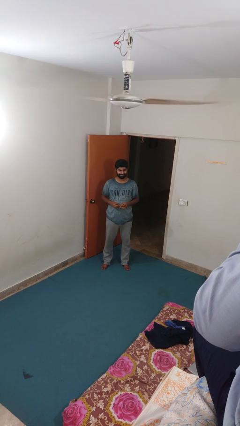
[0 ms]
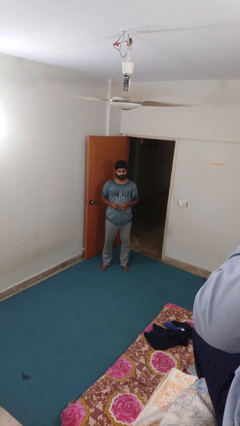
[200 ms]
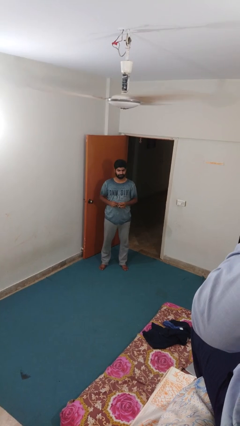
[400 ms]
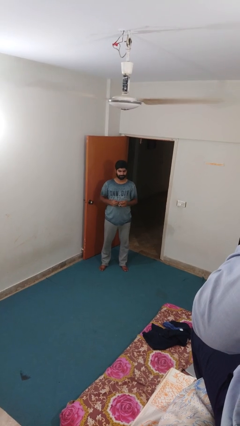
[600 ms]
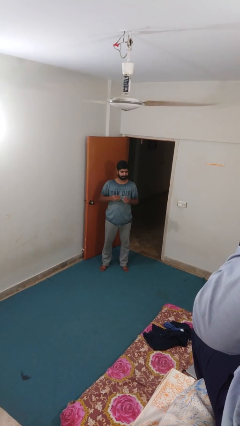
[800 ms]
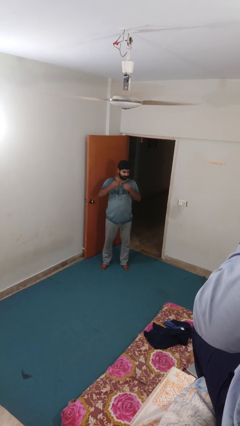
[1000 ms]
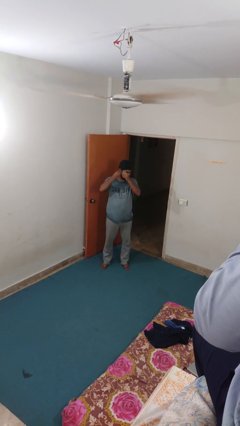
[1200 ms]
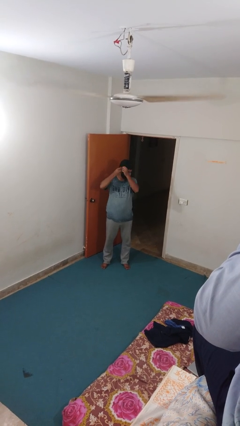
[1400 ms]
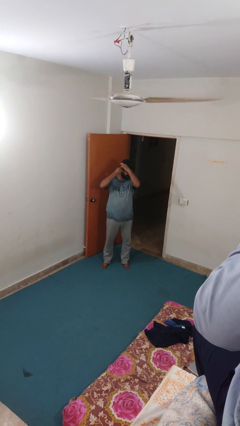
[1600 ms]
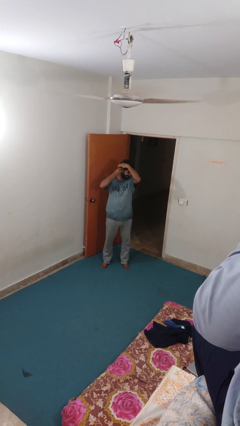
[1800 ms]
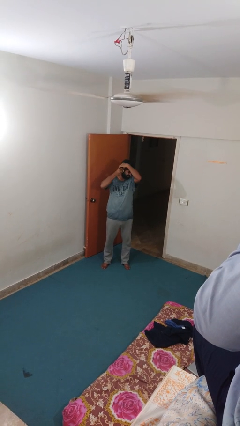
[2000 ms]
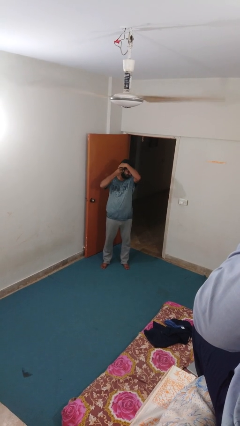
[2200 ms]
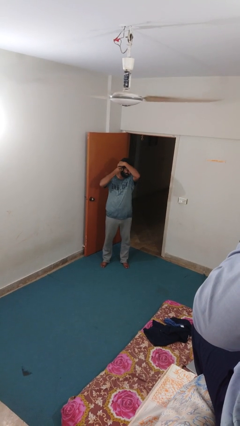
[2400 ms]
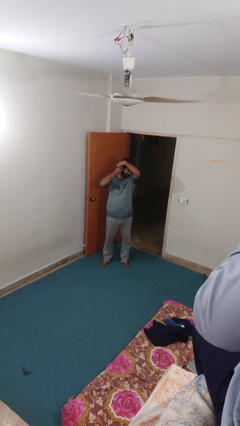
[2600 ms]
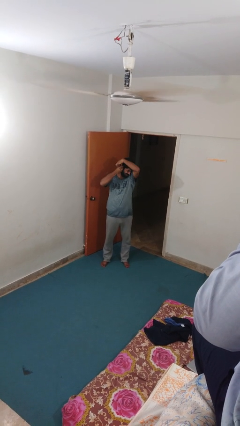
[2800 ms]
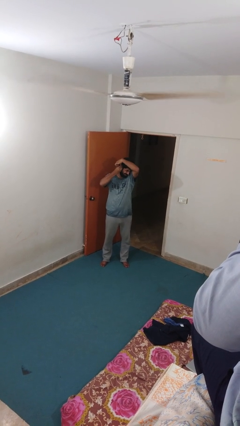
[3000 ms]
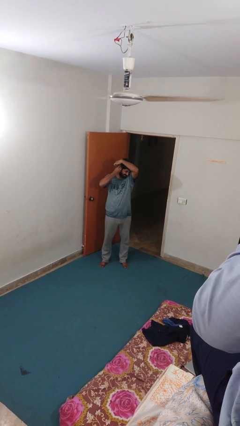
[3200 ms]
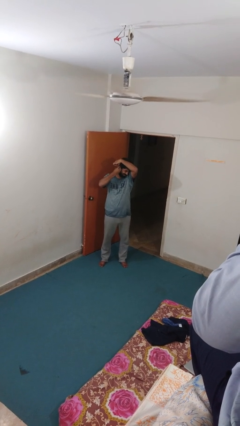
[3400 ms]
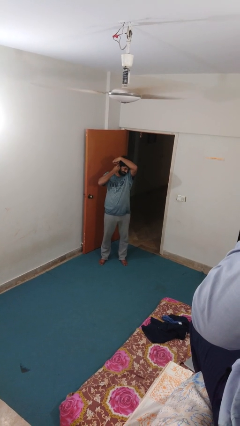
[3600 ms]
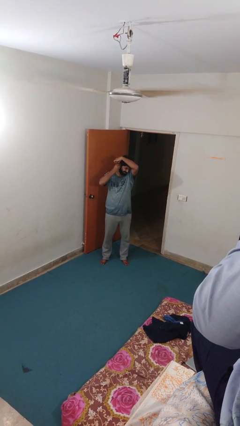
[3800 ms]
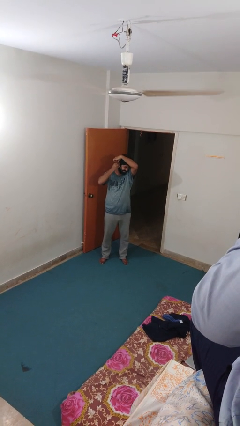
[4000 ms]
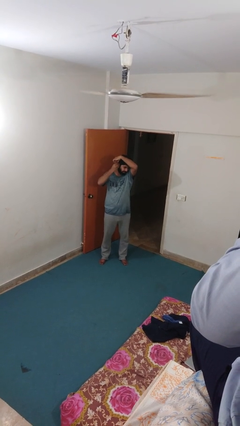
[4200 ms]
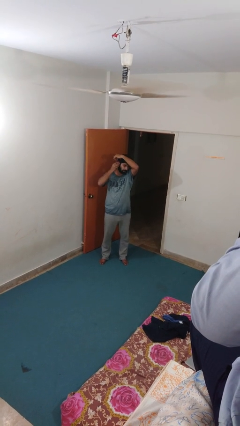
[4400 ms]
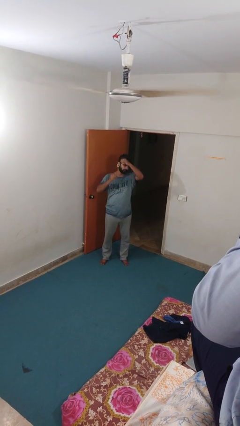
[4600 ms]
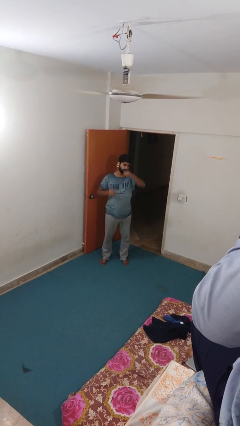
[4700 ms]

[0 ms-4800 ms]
person puts on earrings

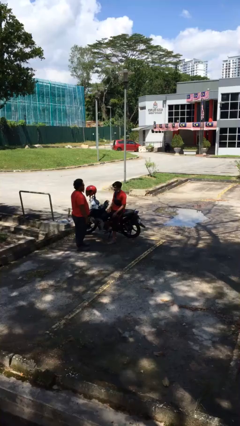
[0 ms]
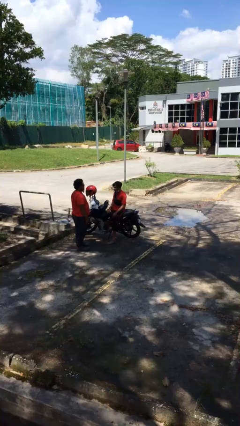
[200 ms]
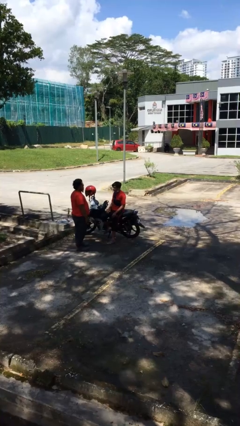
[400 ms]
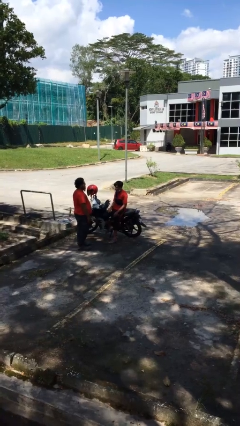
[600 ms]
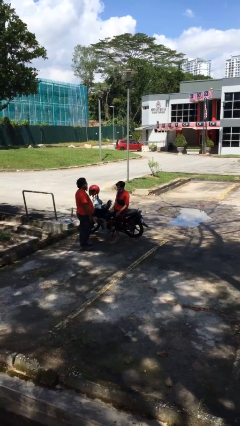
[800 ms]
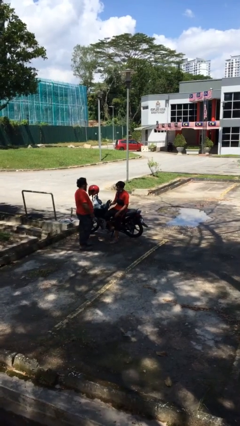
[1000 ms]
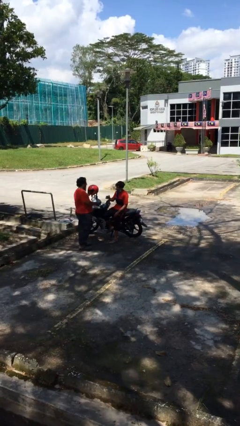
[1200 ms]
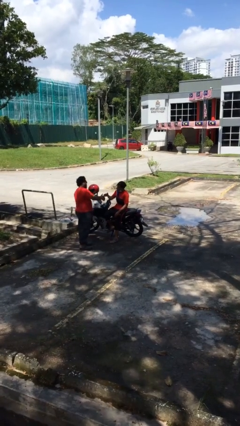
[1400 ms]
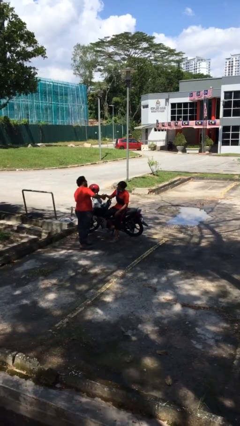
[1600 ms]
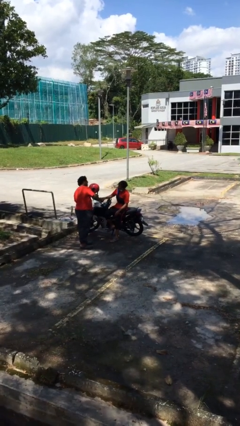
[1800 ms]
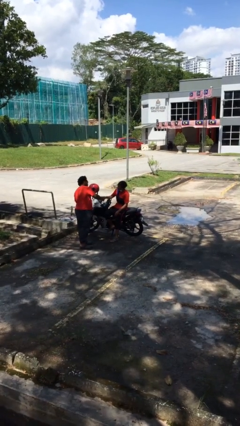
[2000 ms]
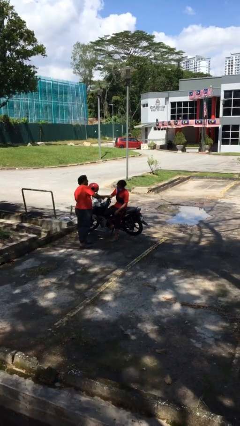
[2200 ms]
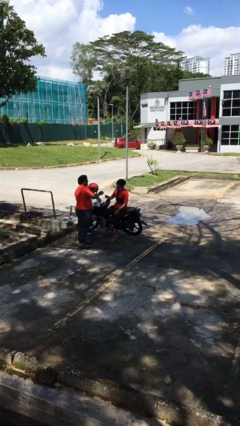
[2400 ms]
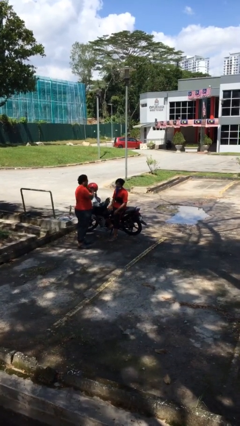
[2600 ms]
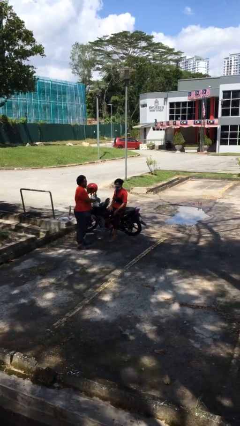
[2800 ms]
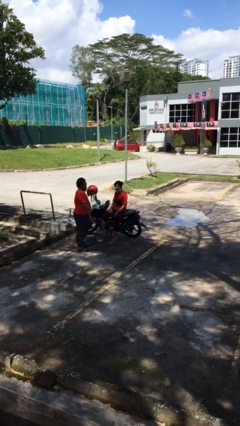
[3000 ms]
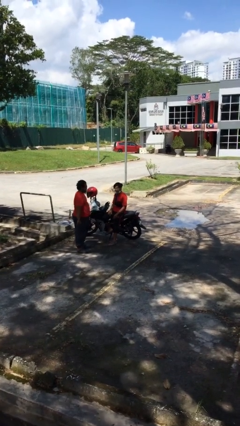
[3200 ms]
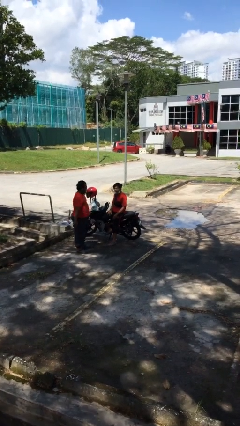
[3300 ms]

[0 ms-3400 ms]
person shakes hand

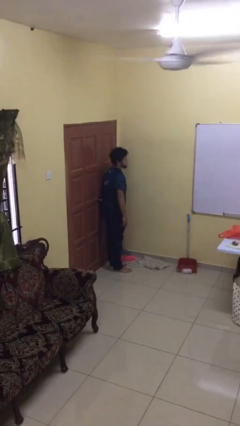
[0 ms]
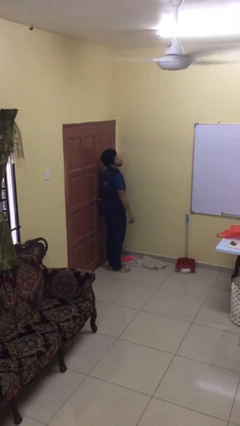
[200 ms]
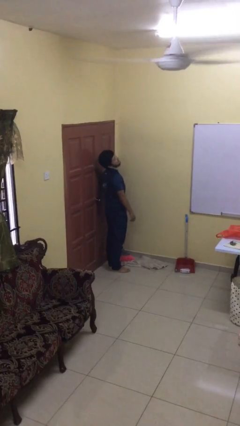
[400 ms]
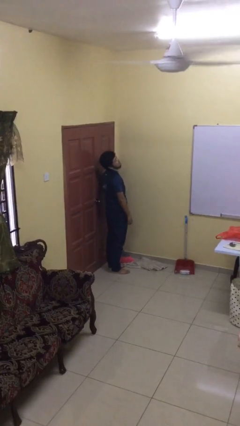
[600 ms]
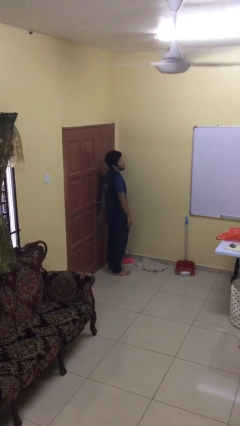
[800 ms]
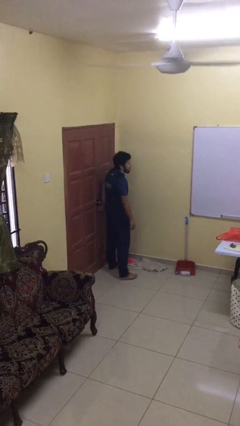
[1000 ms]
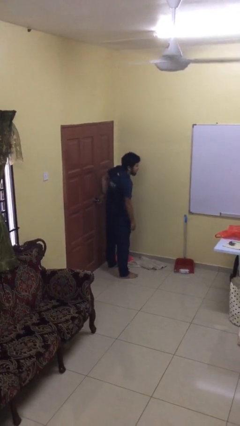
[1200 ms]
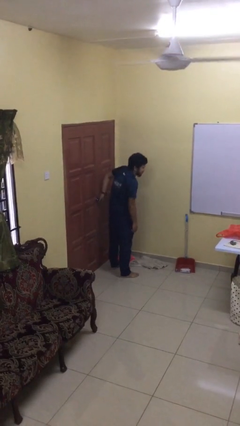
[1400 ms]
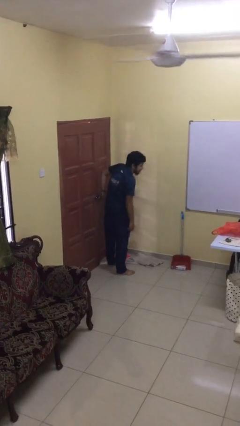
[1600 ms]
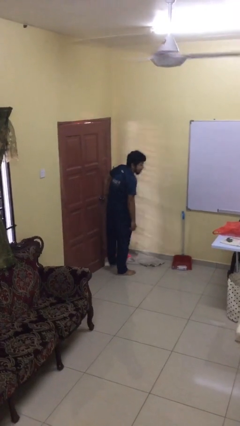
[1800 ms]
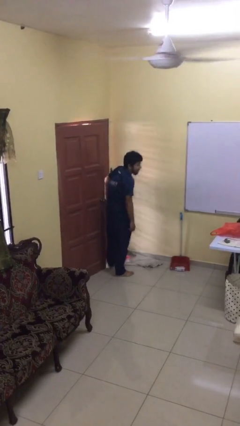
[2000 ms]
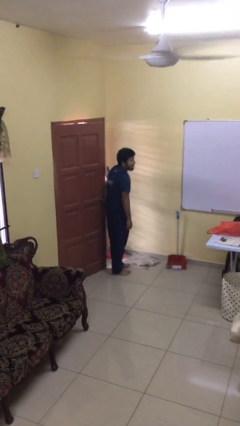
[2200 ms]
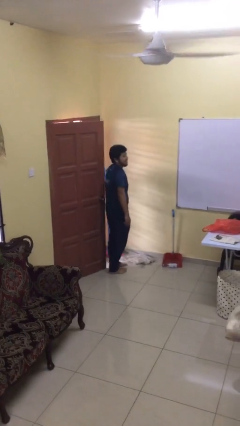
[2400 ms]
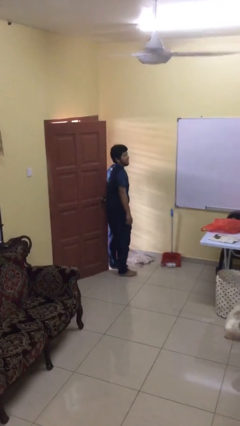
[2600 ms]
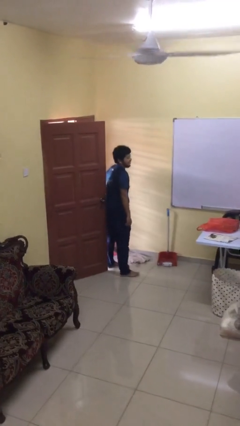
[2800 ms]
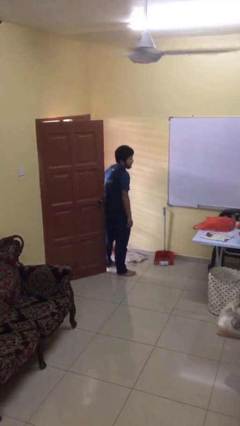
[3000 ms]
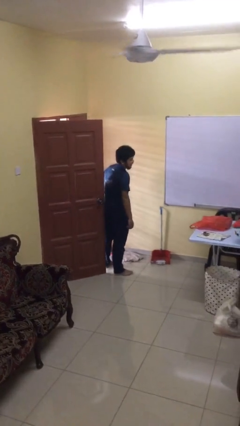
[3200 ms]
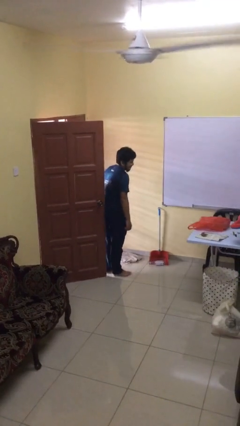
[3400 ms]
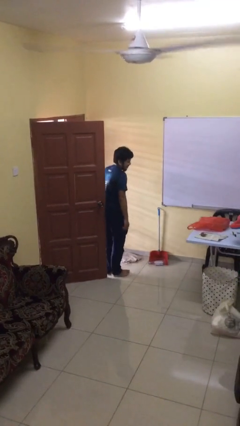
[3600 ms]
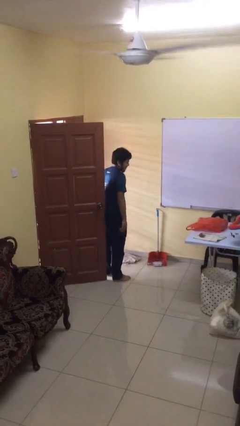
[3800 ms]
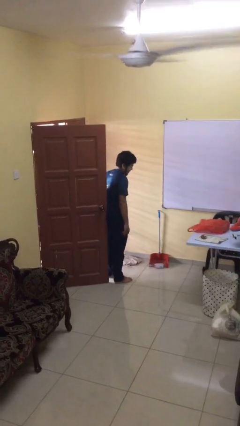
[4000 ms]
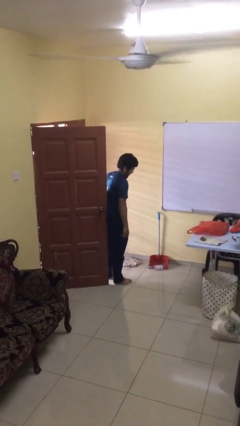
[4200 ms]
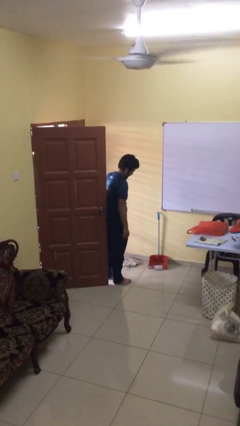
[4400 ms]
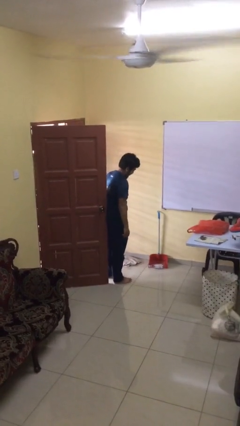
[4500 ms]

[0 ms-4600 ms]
person opens facility door

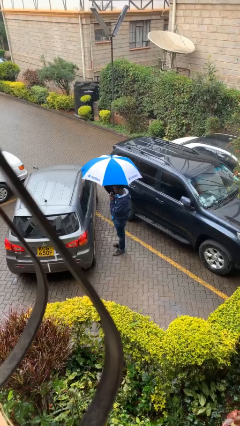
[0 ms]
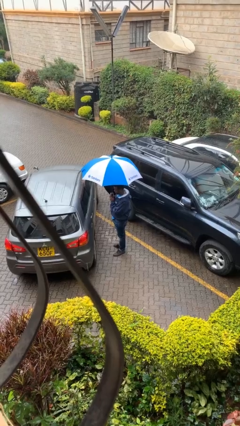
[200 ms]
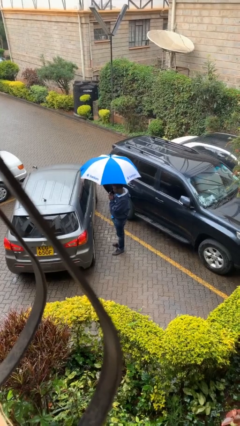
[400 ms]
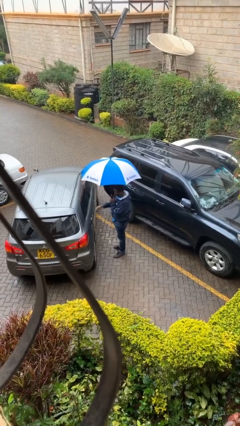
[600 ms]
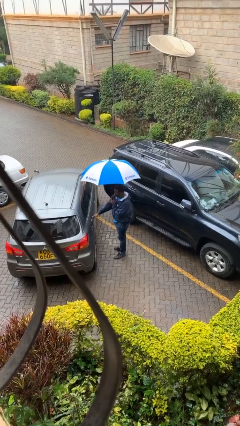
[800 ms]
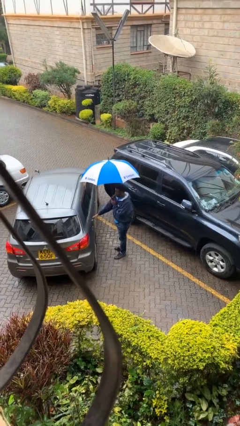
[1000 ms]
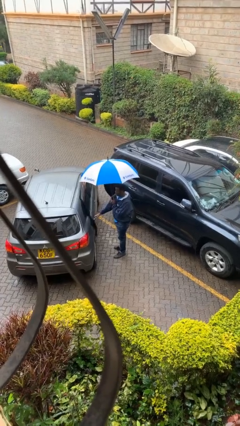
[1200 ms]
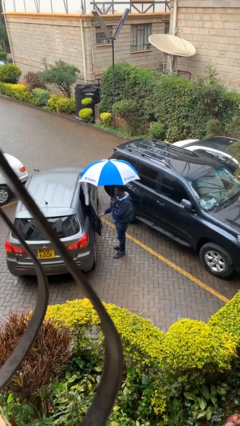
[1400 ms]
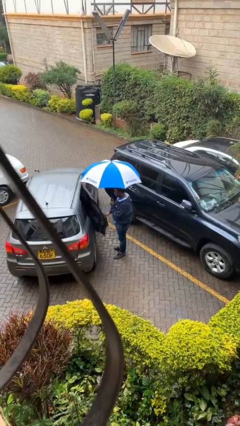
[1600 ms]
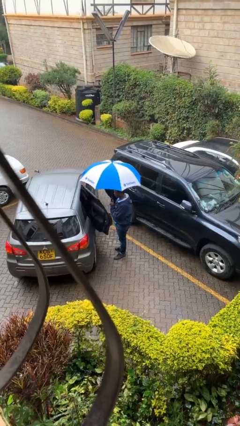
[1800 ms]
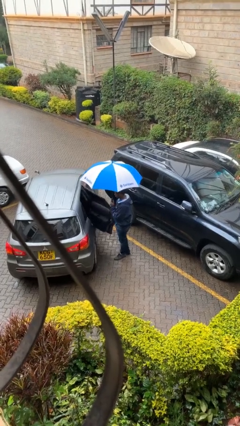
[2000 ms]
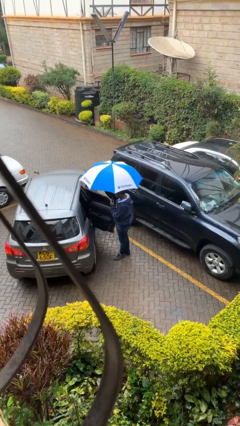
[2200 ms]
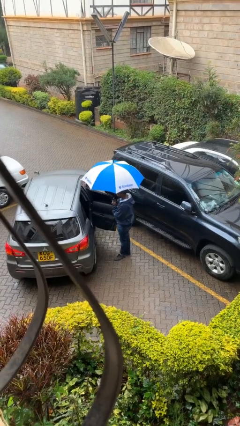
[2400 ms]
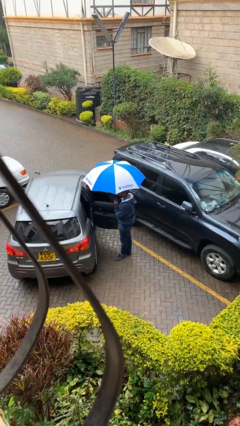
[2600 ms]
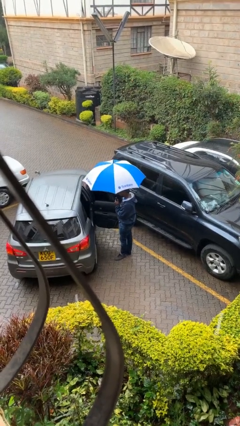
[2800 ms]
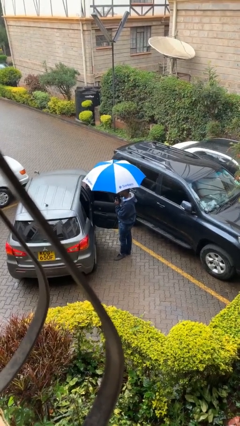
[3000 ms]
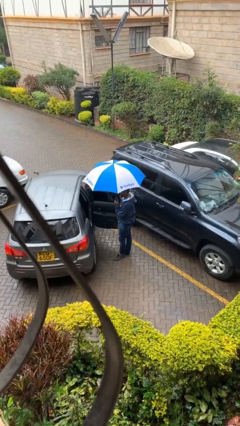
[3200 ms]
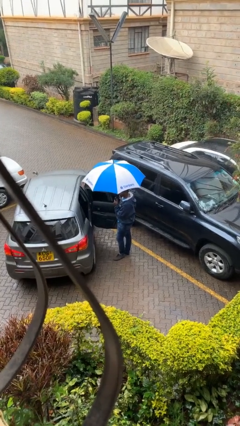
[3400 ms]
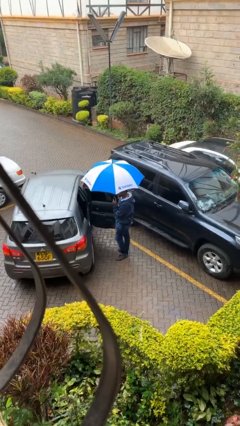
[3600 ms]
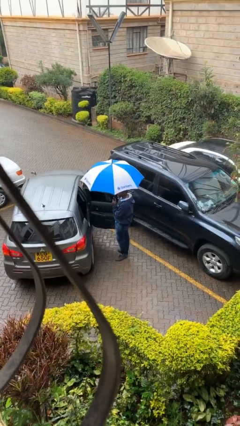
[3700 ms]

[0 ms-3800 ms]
person opens car door

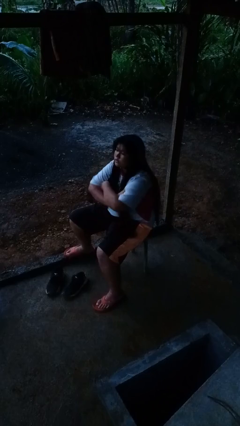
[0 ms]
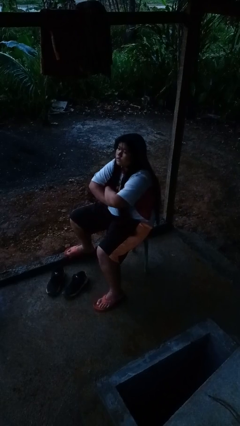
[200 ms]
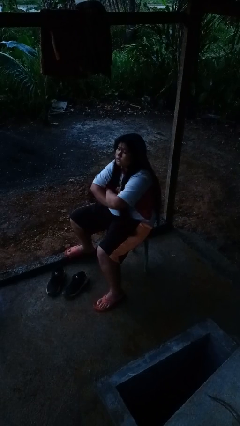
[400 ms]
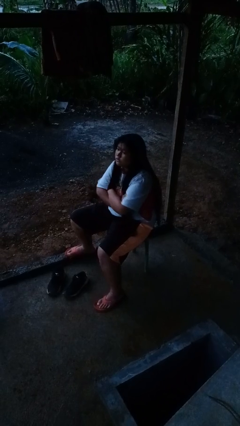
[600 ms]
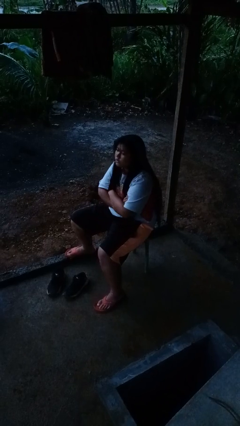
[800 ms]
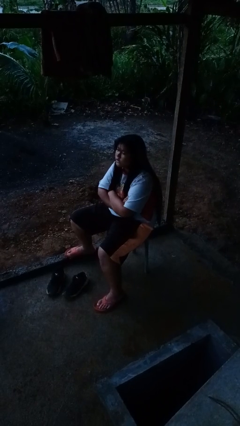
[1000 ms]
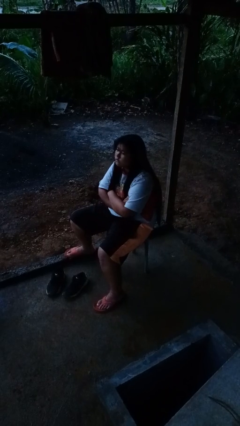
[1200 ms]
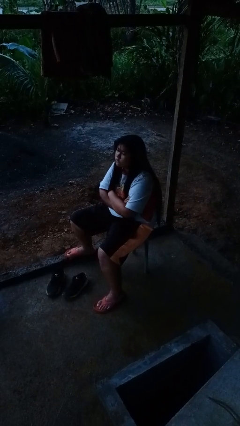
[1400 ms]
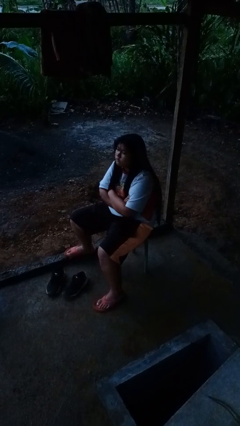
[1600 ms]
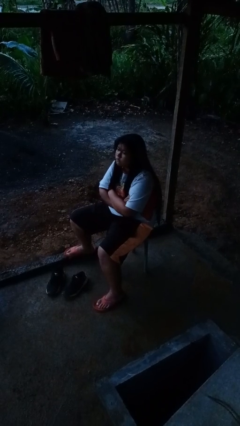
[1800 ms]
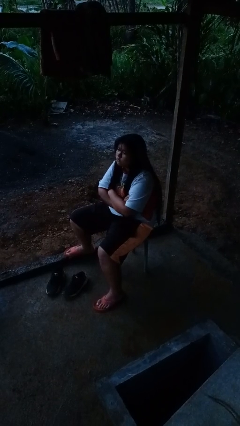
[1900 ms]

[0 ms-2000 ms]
person gestures arms x
